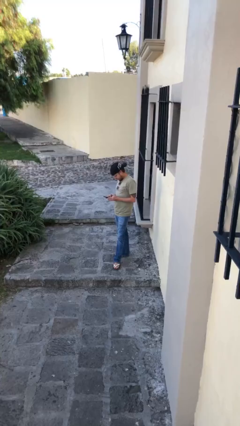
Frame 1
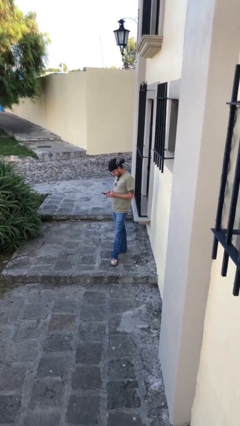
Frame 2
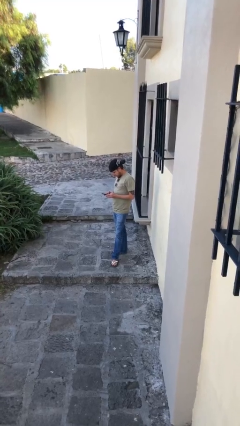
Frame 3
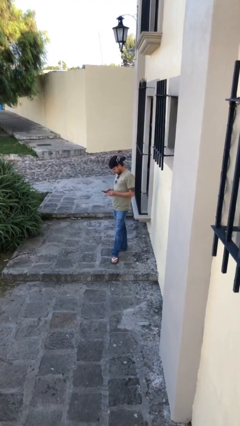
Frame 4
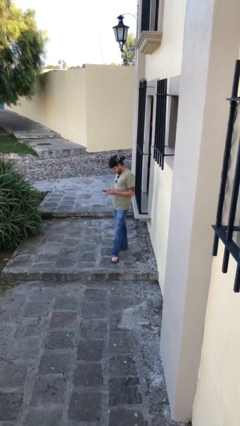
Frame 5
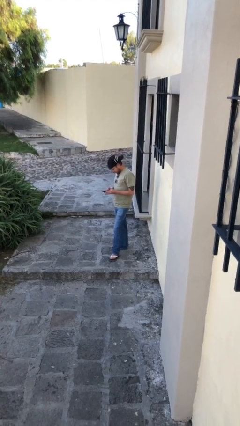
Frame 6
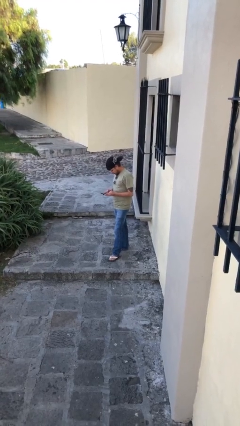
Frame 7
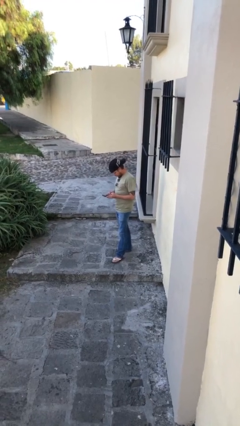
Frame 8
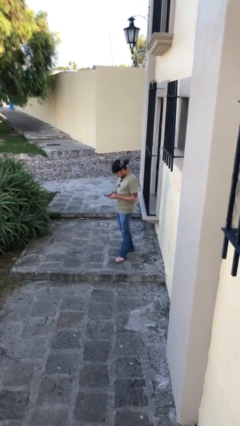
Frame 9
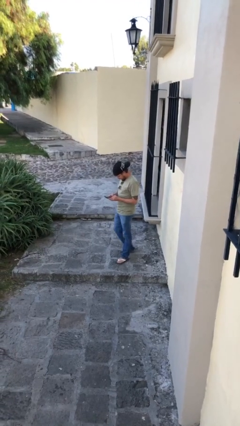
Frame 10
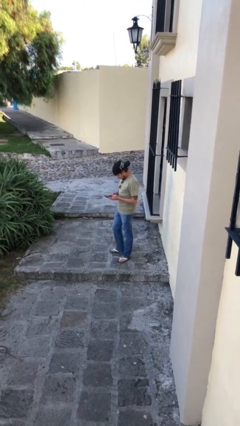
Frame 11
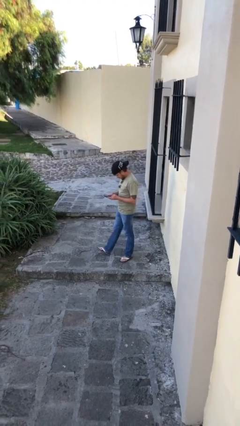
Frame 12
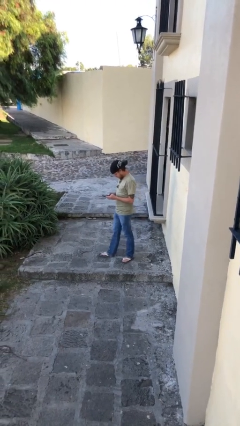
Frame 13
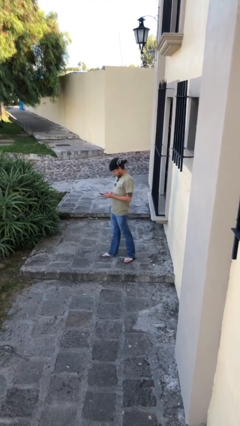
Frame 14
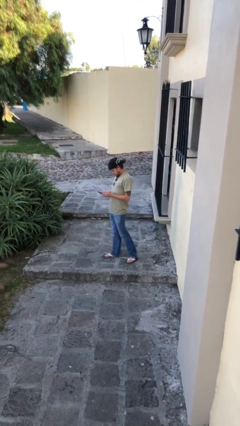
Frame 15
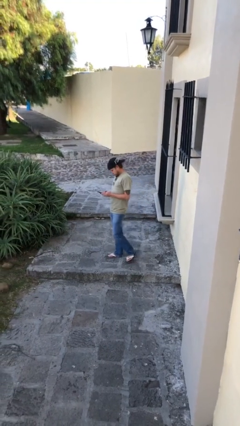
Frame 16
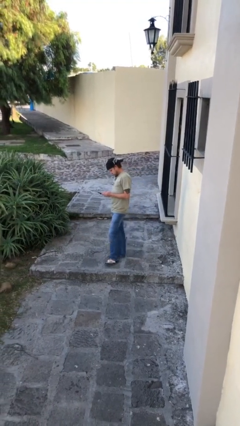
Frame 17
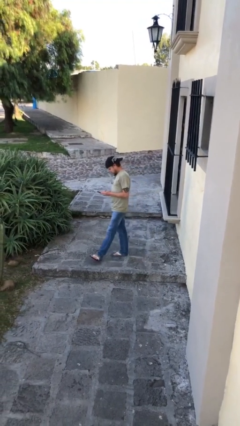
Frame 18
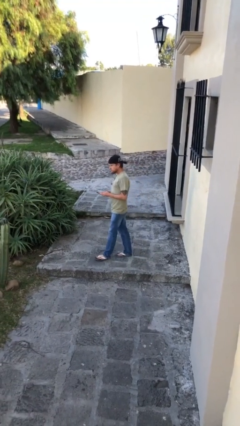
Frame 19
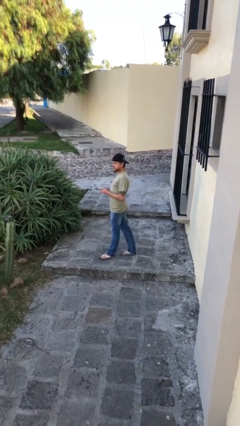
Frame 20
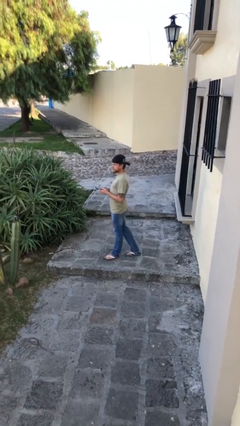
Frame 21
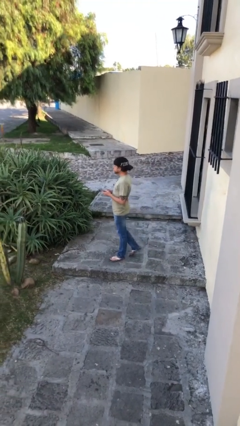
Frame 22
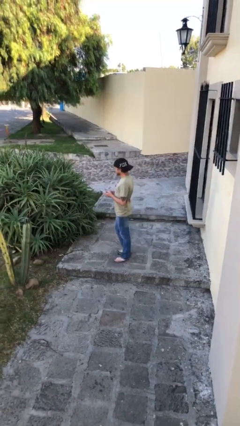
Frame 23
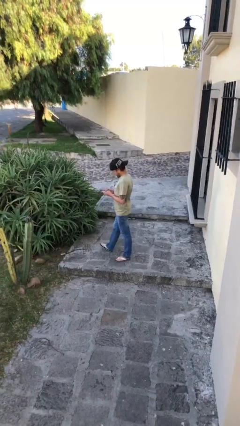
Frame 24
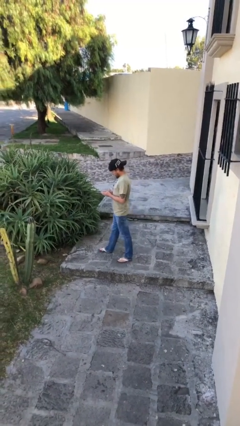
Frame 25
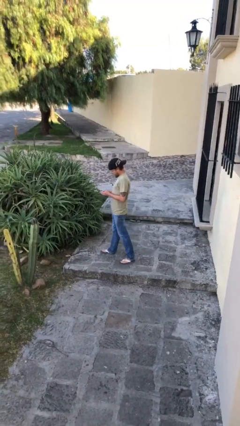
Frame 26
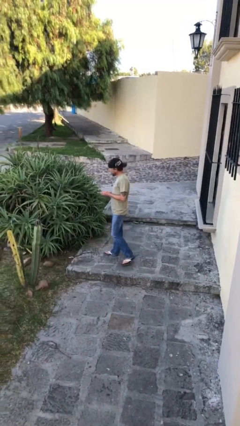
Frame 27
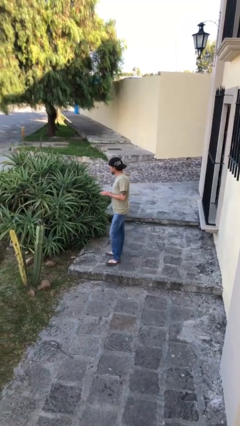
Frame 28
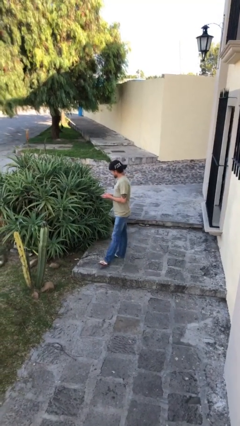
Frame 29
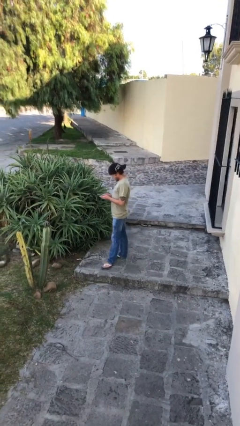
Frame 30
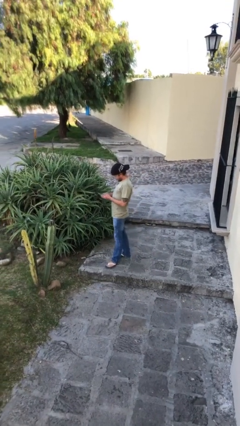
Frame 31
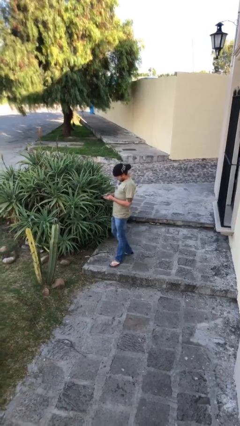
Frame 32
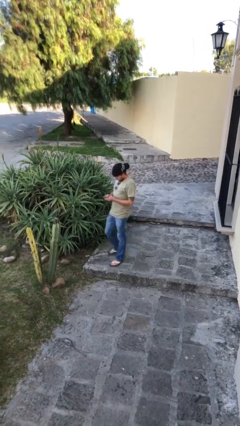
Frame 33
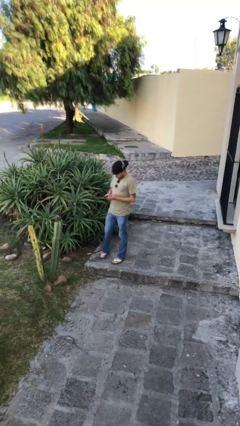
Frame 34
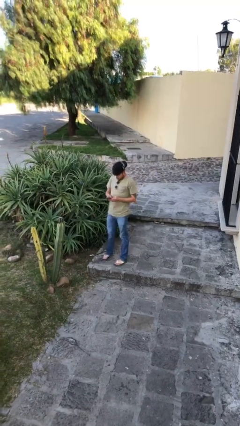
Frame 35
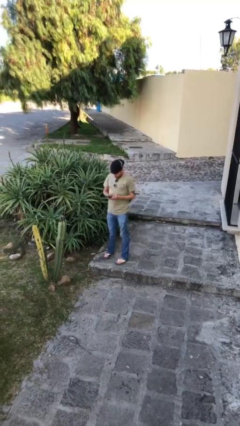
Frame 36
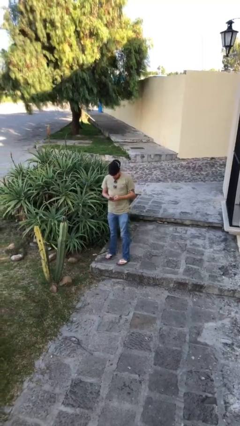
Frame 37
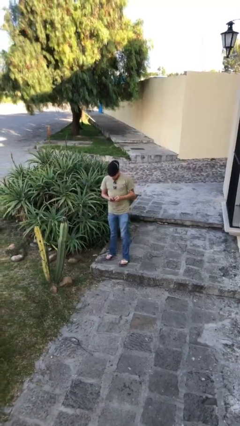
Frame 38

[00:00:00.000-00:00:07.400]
person texts on phone

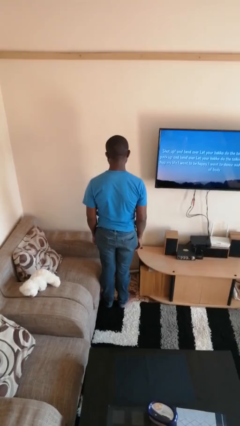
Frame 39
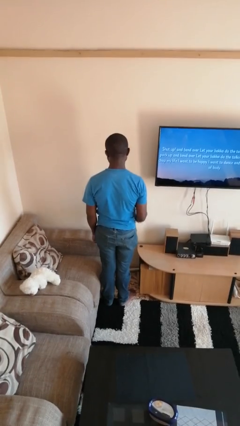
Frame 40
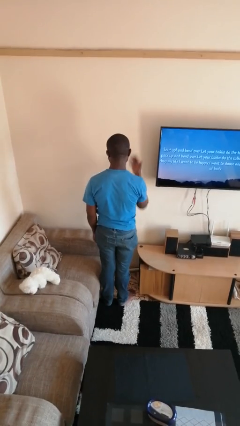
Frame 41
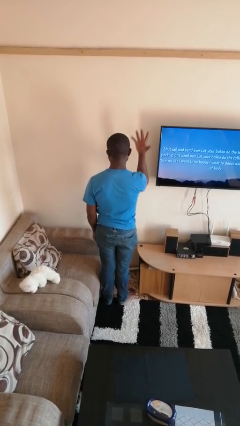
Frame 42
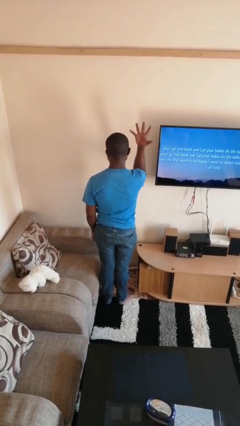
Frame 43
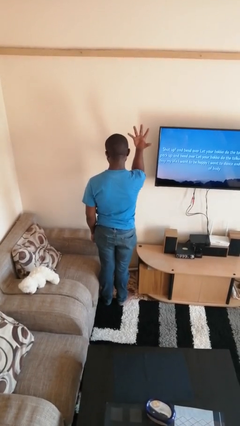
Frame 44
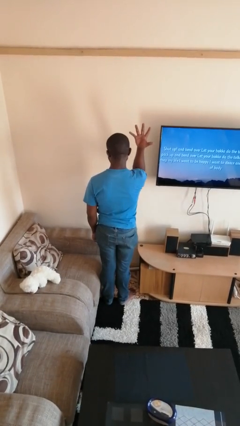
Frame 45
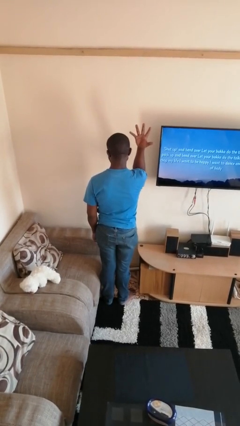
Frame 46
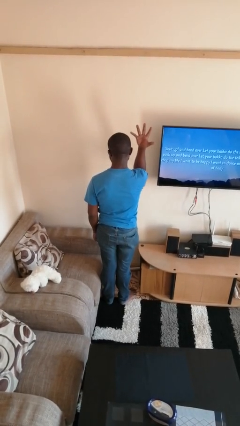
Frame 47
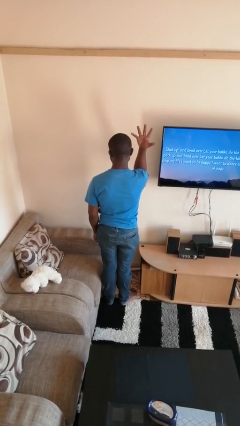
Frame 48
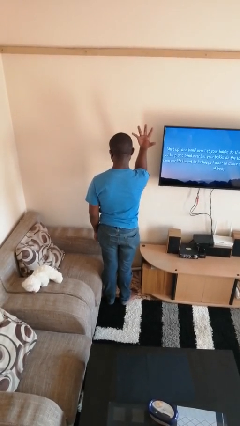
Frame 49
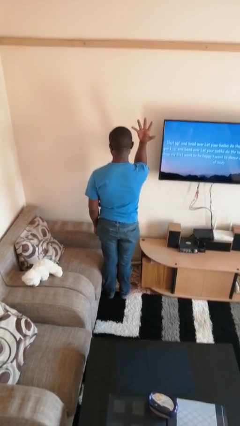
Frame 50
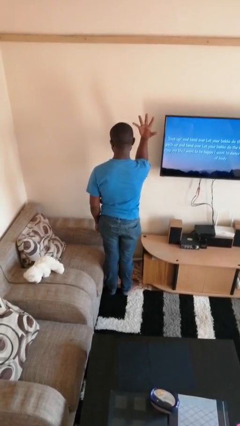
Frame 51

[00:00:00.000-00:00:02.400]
person gestures number five

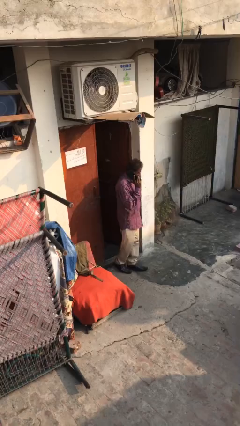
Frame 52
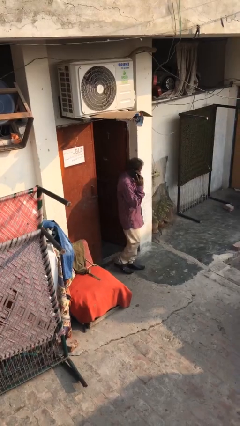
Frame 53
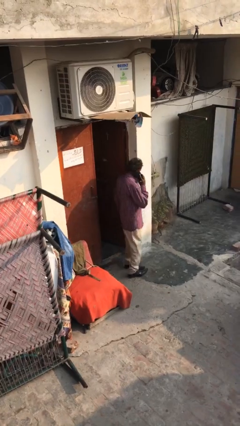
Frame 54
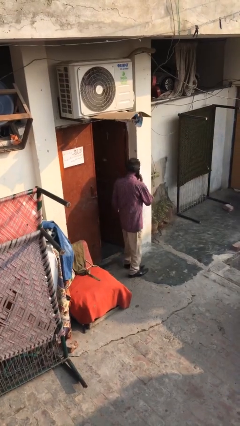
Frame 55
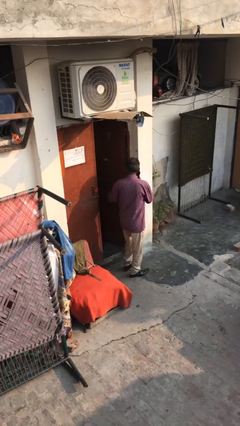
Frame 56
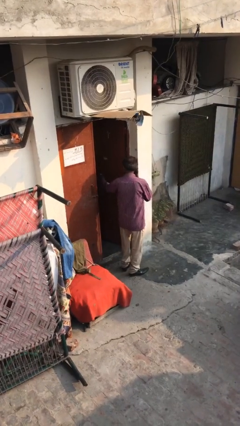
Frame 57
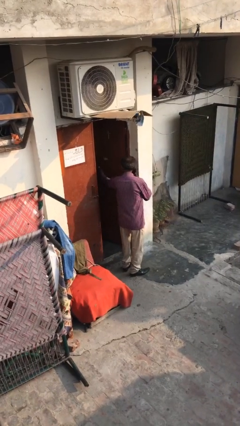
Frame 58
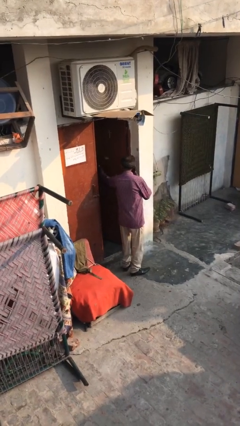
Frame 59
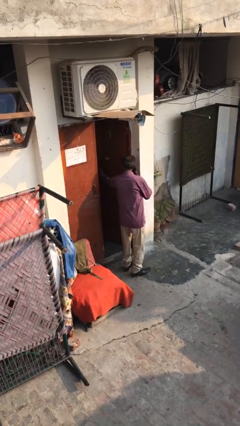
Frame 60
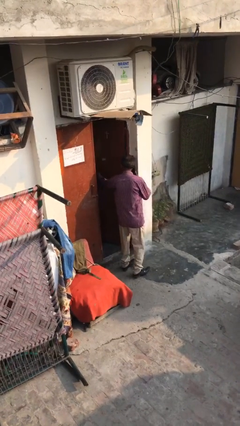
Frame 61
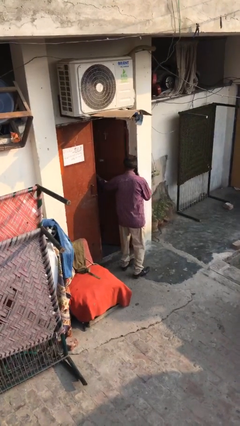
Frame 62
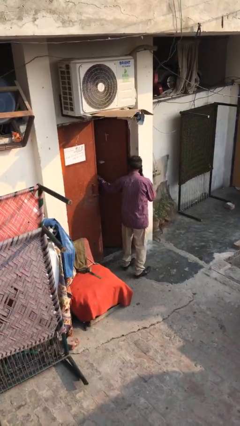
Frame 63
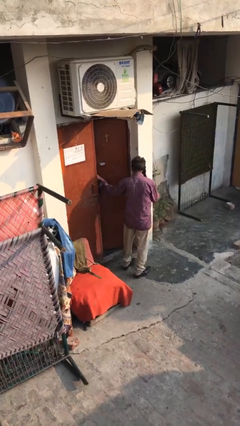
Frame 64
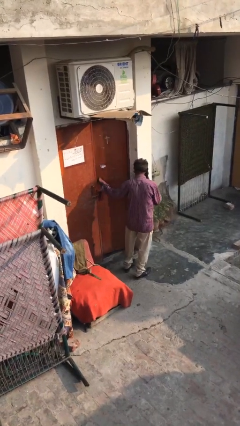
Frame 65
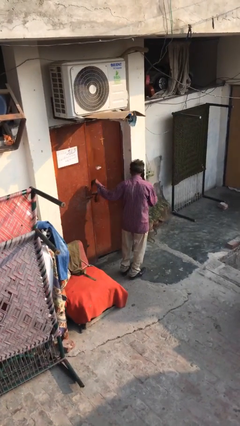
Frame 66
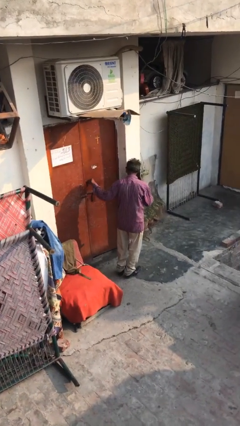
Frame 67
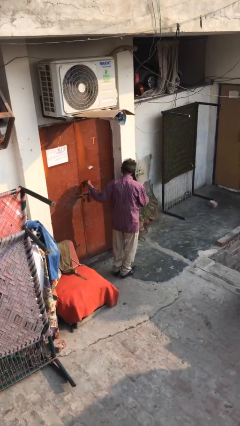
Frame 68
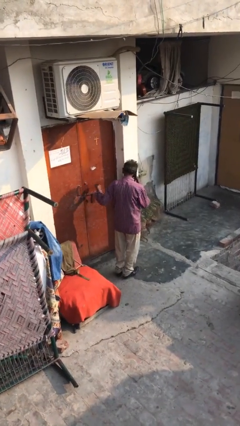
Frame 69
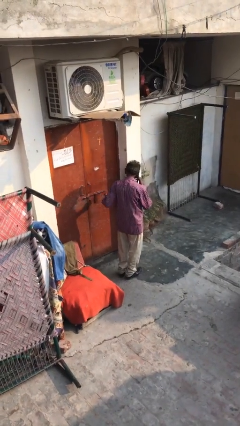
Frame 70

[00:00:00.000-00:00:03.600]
person closes facility door

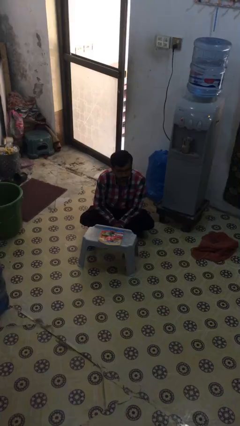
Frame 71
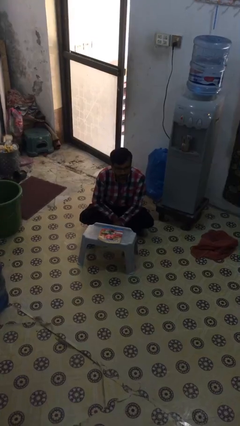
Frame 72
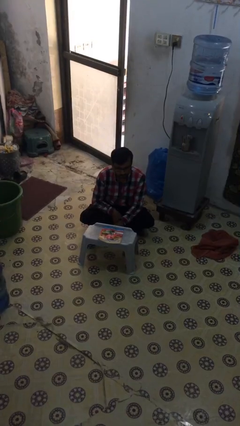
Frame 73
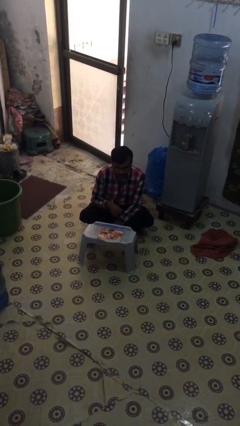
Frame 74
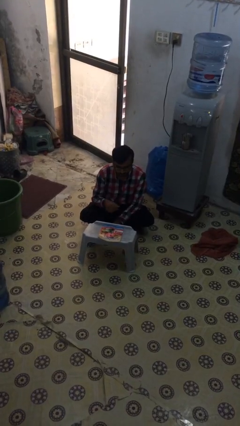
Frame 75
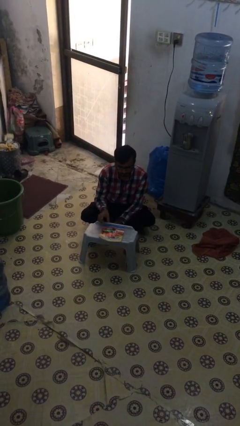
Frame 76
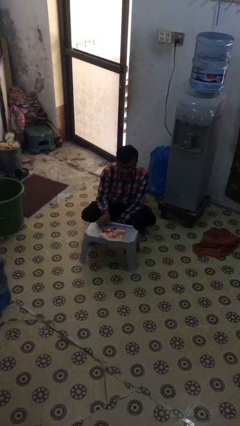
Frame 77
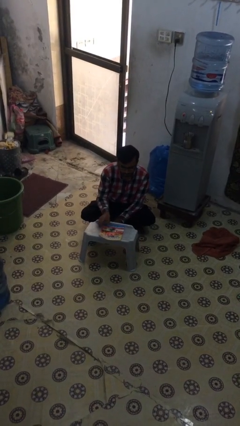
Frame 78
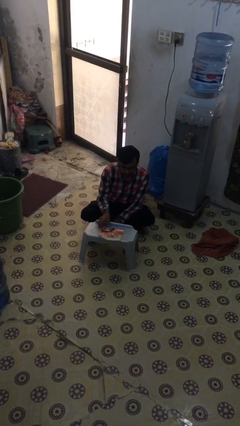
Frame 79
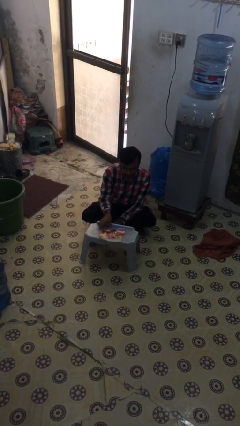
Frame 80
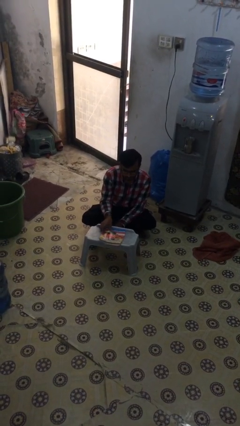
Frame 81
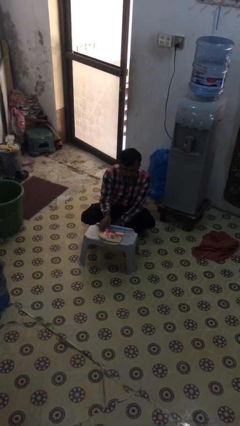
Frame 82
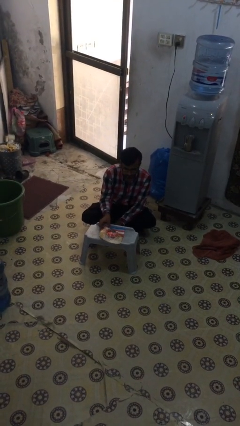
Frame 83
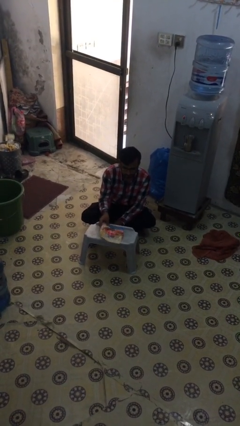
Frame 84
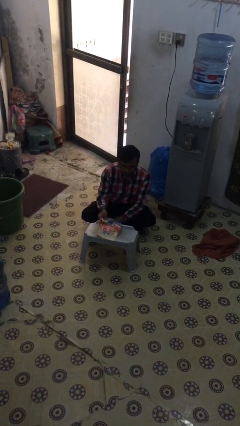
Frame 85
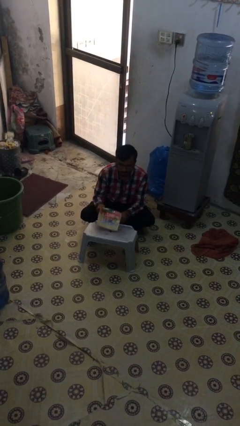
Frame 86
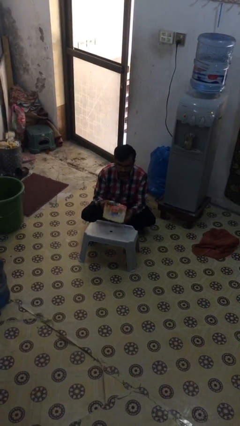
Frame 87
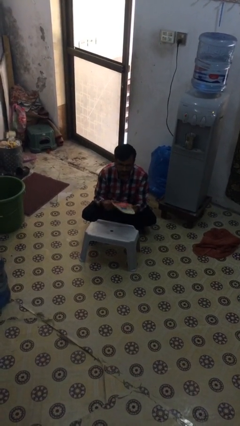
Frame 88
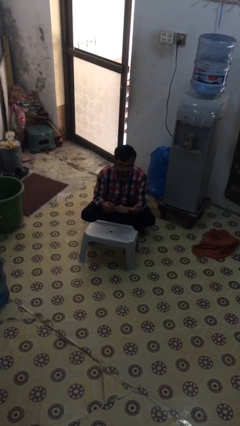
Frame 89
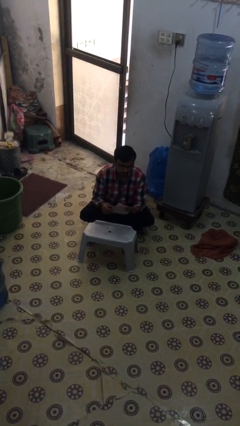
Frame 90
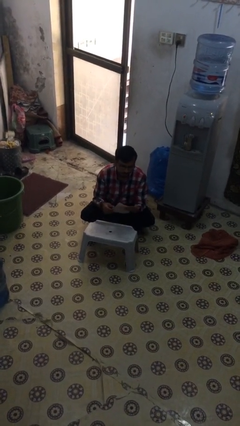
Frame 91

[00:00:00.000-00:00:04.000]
person picks up object from table

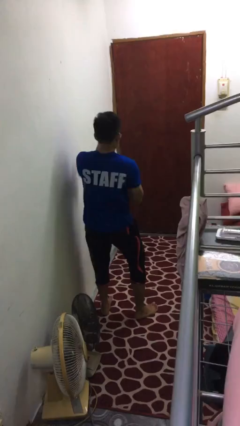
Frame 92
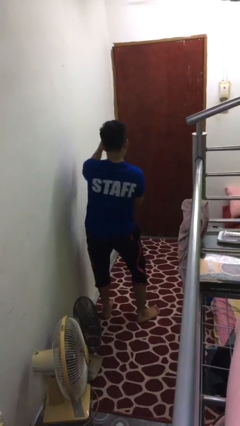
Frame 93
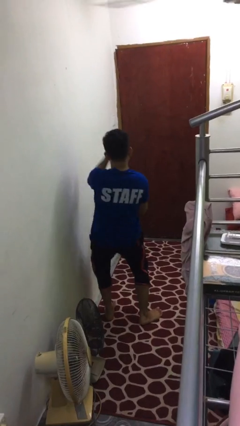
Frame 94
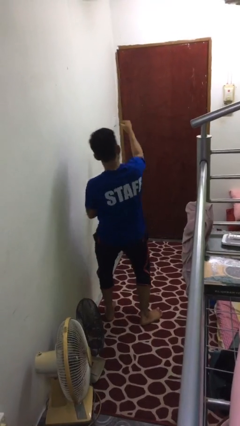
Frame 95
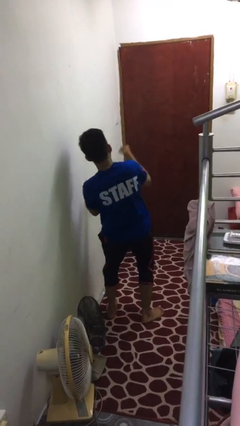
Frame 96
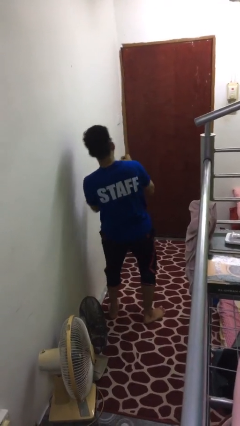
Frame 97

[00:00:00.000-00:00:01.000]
person punches
